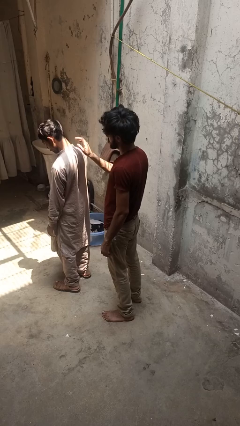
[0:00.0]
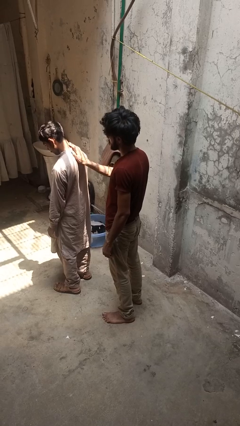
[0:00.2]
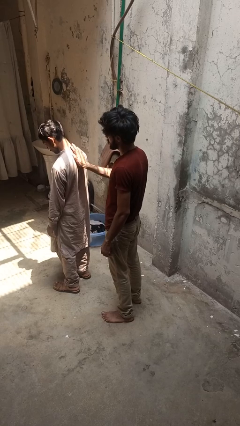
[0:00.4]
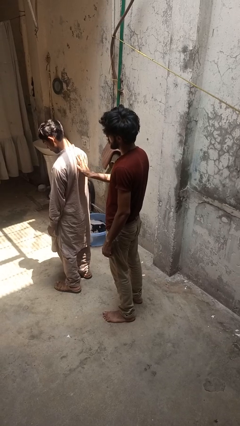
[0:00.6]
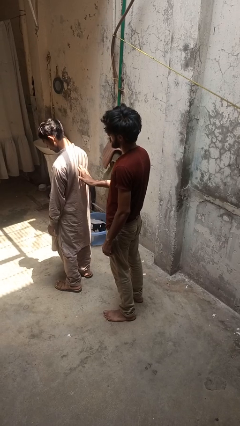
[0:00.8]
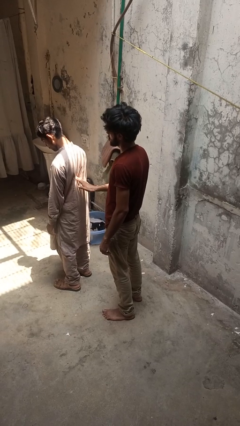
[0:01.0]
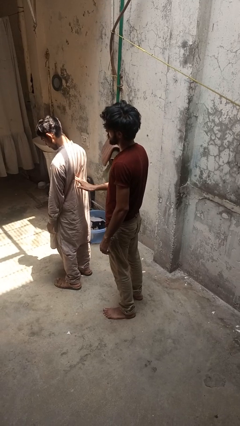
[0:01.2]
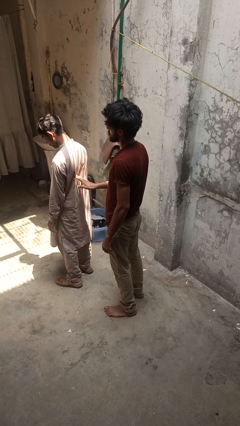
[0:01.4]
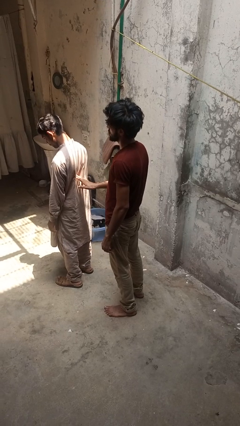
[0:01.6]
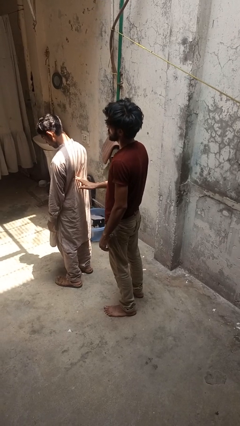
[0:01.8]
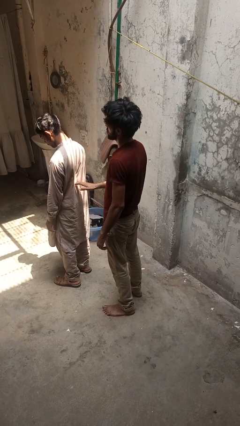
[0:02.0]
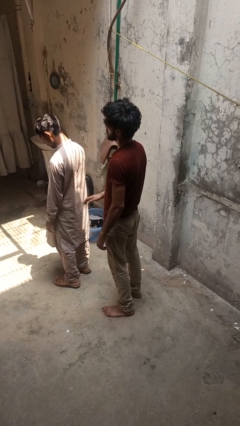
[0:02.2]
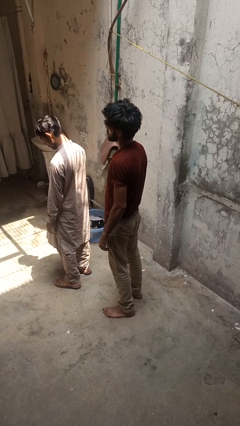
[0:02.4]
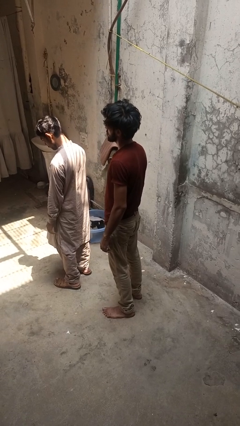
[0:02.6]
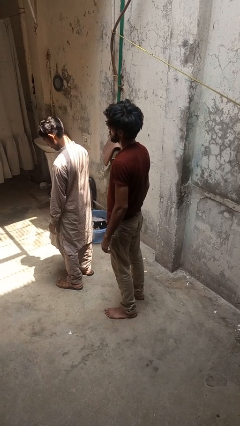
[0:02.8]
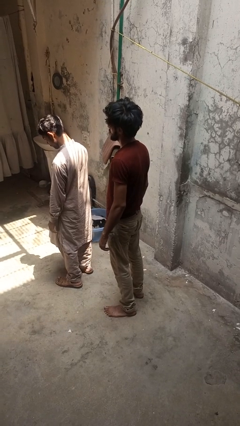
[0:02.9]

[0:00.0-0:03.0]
person touches back of person

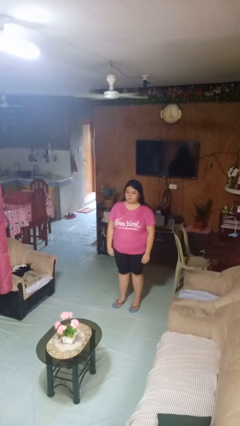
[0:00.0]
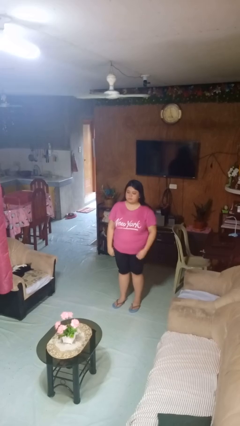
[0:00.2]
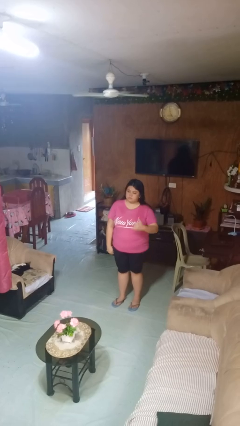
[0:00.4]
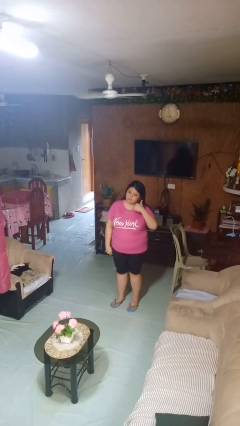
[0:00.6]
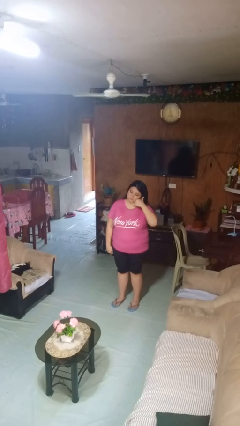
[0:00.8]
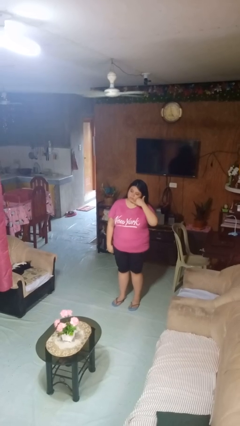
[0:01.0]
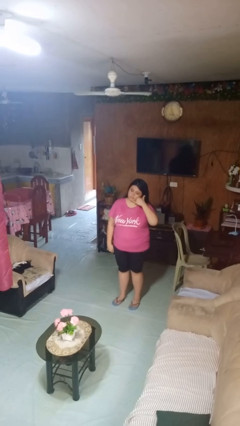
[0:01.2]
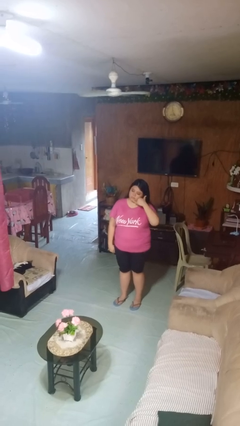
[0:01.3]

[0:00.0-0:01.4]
person gestures call me

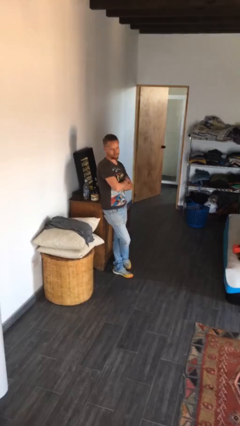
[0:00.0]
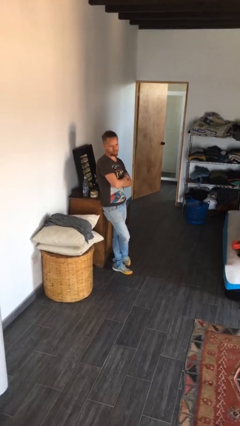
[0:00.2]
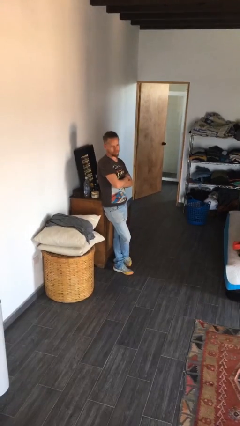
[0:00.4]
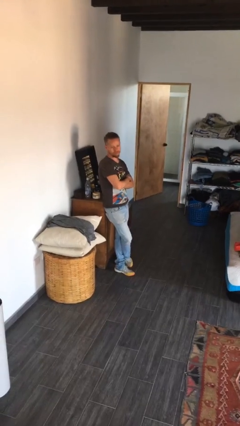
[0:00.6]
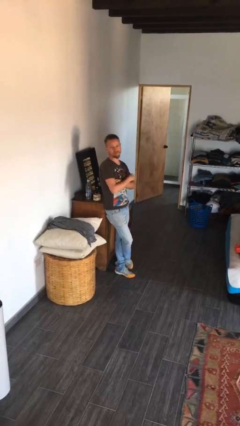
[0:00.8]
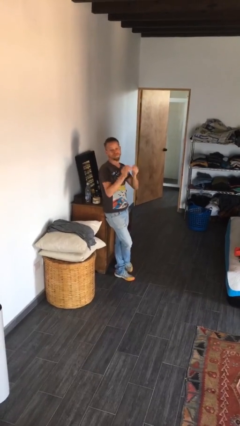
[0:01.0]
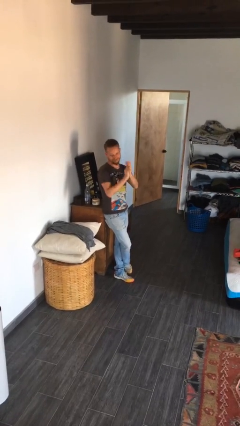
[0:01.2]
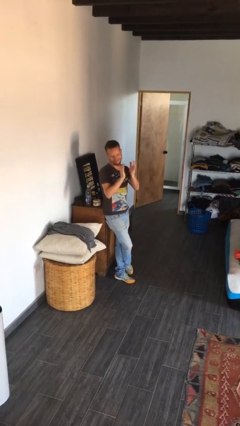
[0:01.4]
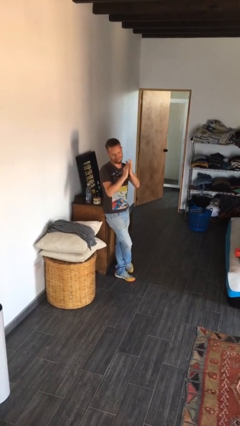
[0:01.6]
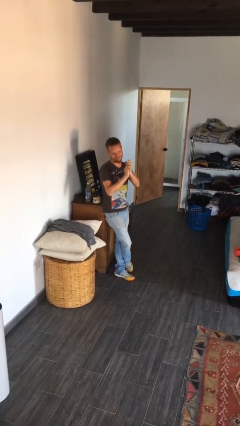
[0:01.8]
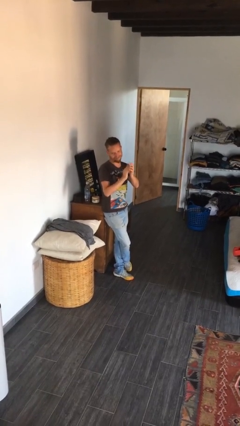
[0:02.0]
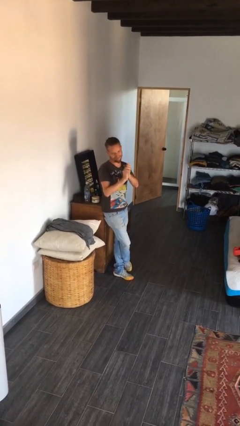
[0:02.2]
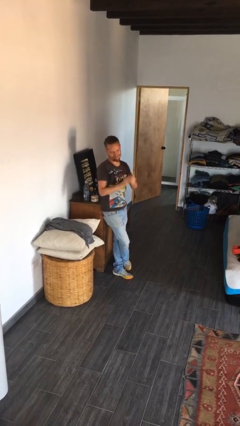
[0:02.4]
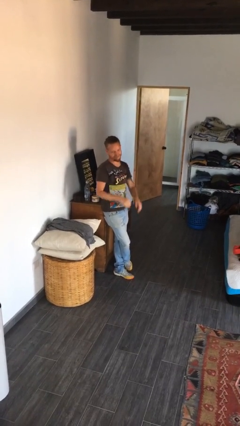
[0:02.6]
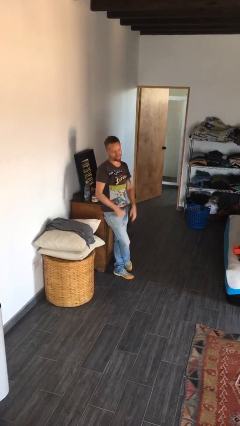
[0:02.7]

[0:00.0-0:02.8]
person claps hands

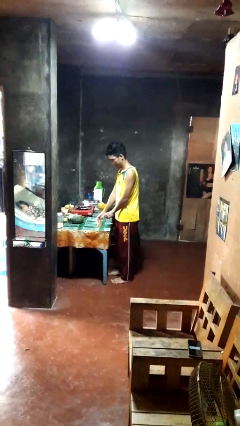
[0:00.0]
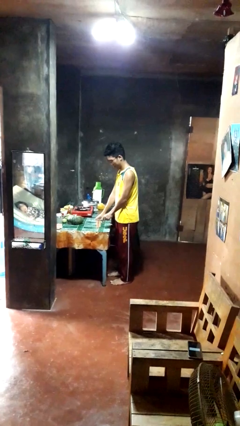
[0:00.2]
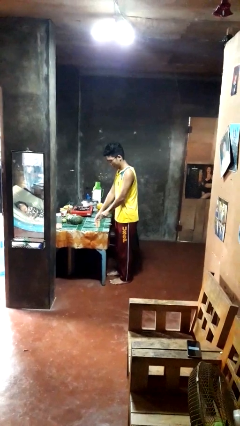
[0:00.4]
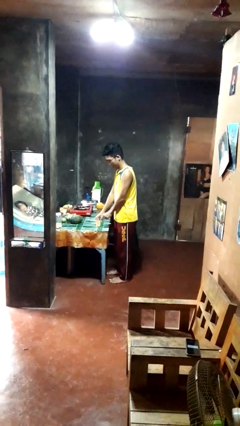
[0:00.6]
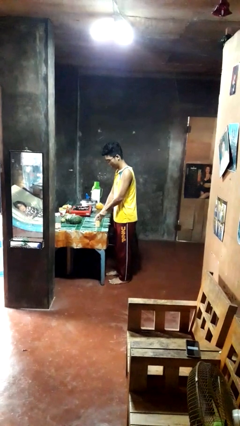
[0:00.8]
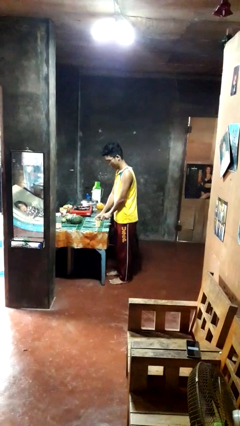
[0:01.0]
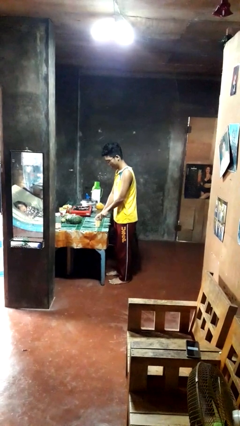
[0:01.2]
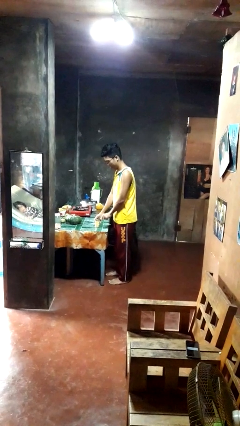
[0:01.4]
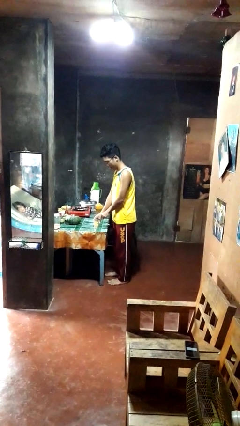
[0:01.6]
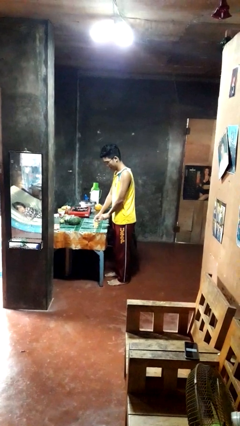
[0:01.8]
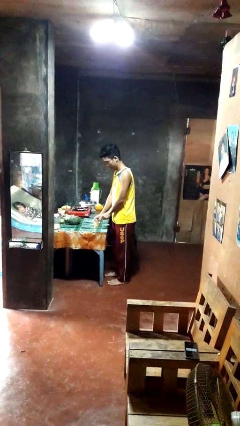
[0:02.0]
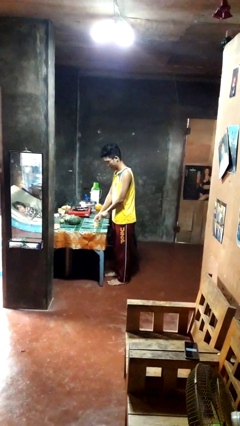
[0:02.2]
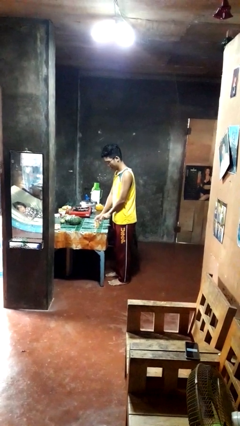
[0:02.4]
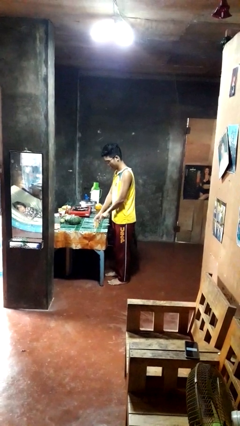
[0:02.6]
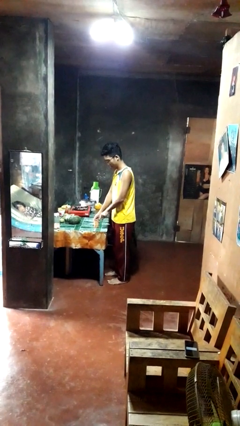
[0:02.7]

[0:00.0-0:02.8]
person opens can with can opener

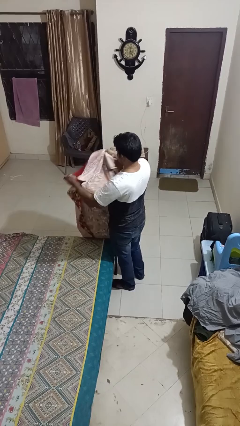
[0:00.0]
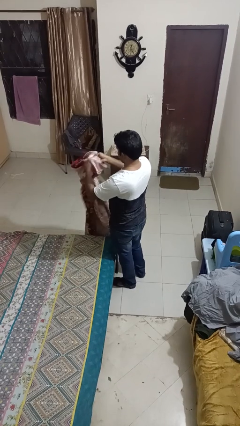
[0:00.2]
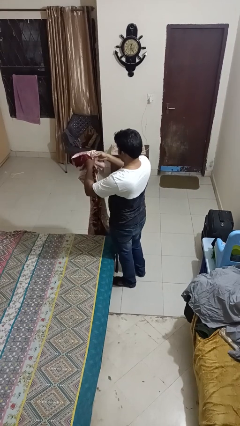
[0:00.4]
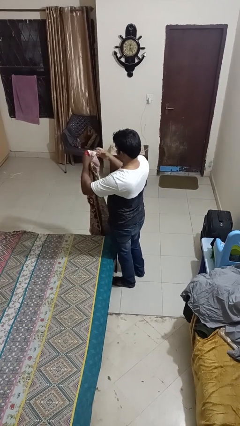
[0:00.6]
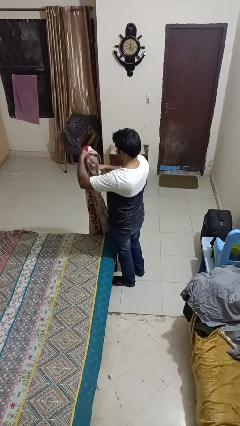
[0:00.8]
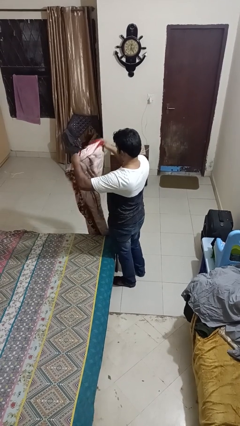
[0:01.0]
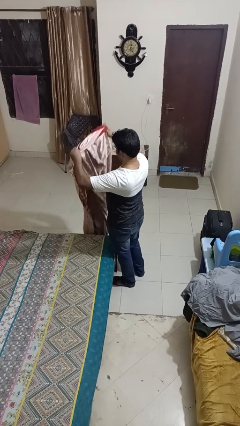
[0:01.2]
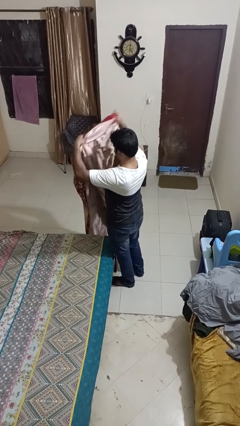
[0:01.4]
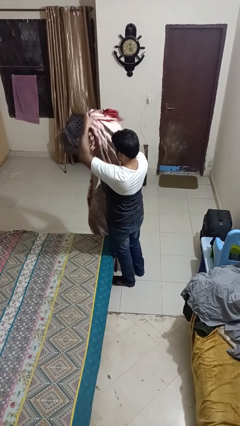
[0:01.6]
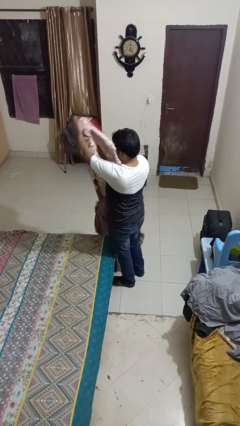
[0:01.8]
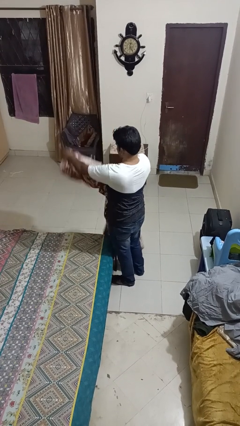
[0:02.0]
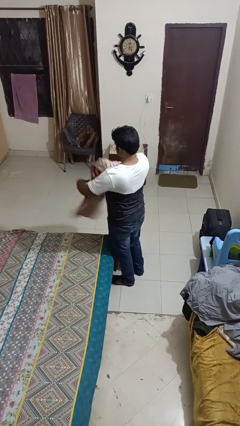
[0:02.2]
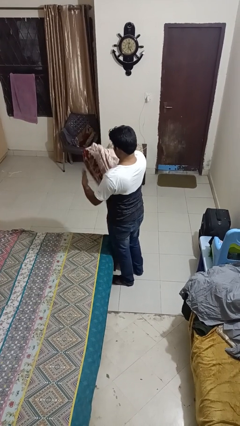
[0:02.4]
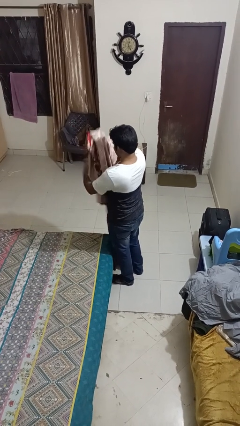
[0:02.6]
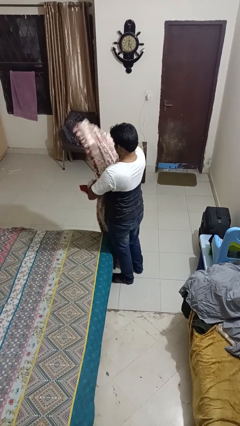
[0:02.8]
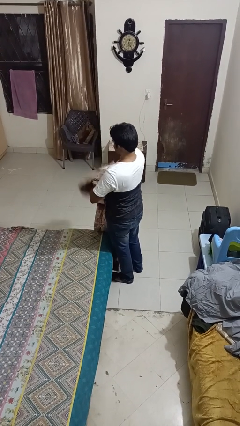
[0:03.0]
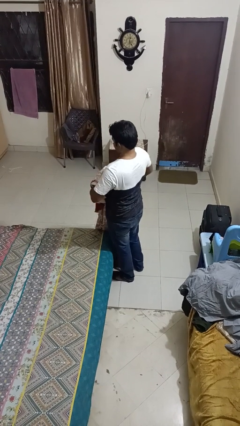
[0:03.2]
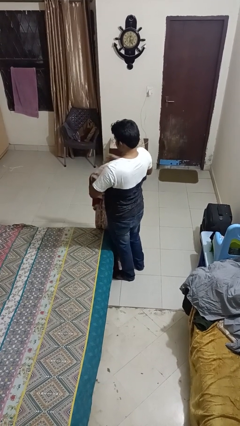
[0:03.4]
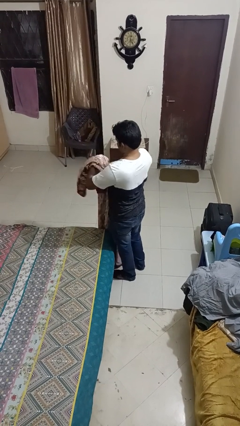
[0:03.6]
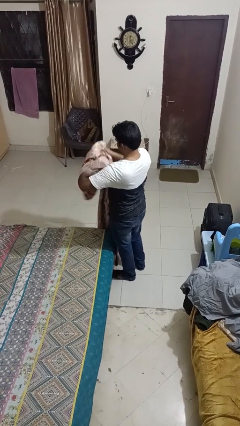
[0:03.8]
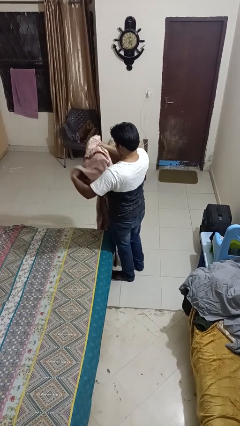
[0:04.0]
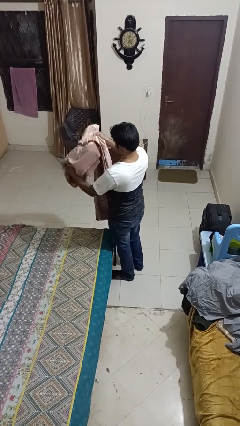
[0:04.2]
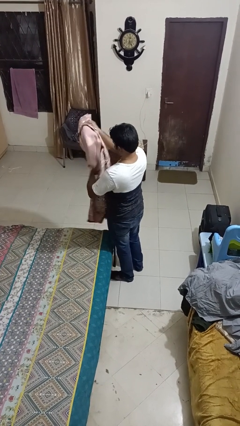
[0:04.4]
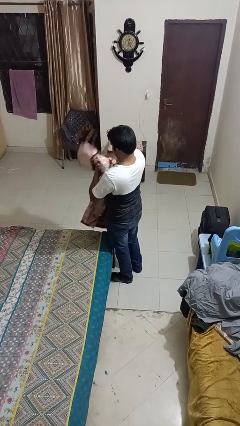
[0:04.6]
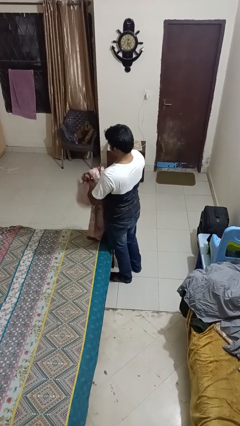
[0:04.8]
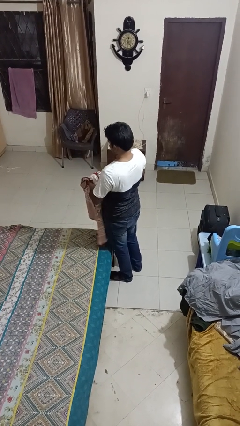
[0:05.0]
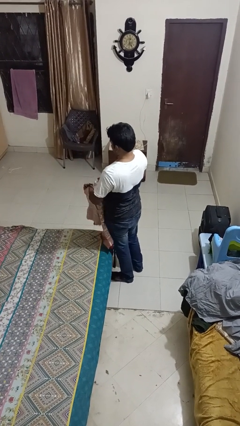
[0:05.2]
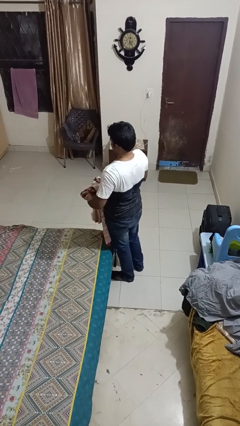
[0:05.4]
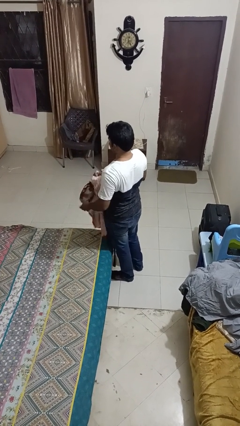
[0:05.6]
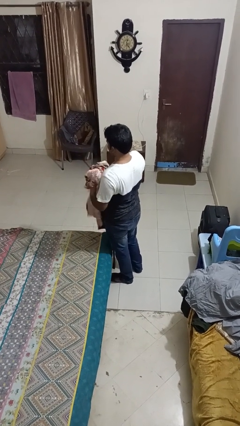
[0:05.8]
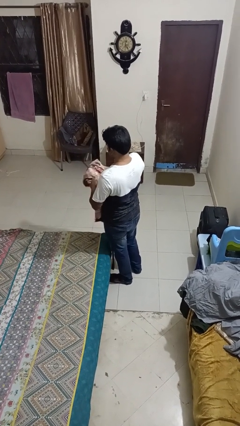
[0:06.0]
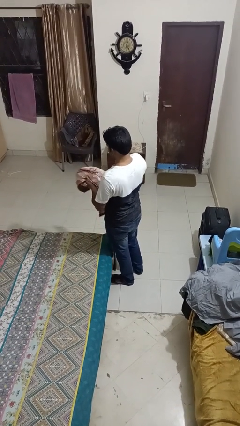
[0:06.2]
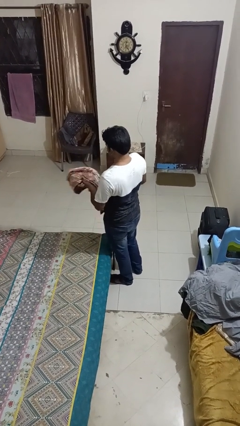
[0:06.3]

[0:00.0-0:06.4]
person folds blanket

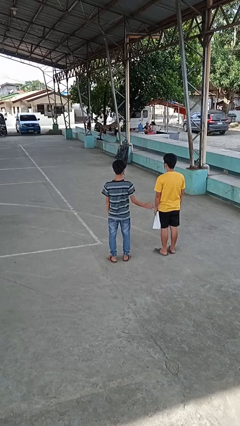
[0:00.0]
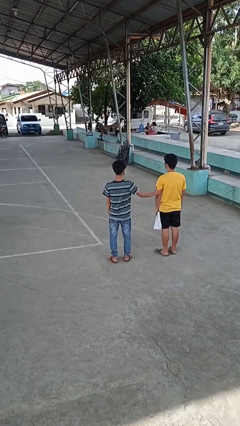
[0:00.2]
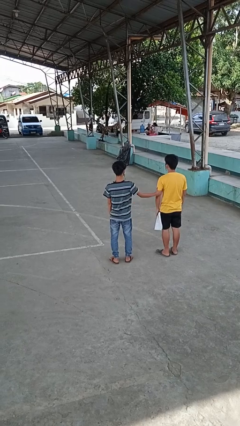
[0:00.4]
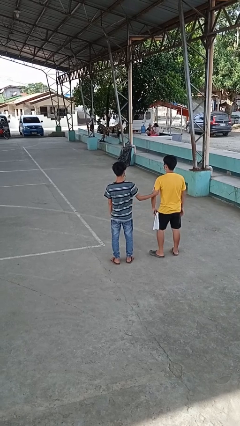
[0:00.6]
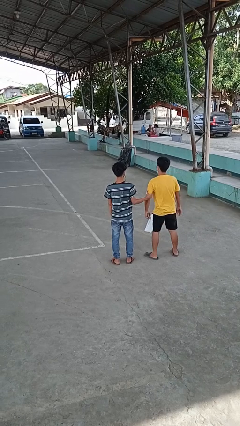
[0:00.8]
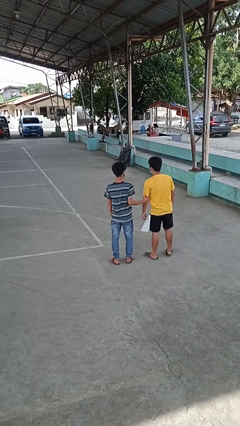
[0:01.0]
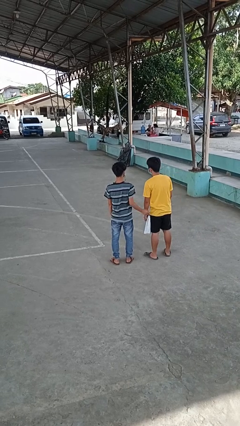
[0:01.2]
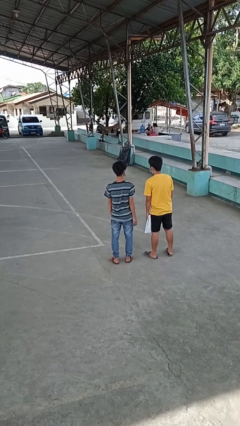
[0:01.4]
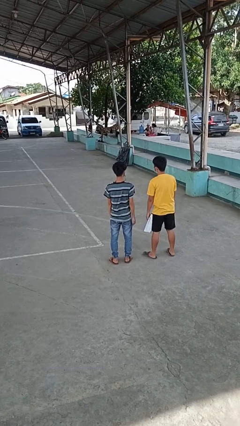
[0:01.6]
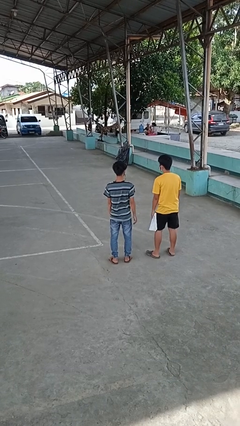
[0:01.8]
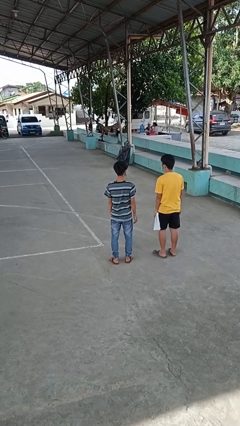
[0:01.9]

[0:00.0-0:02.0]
person grabs person by bicep
